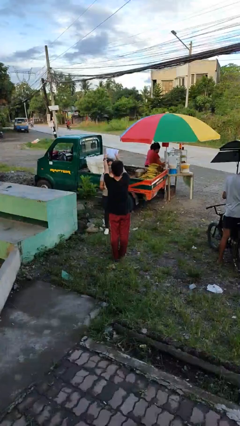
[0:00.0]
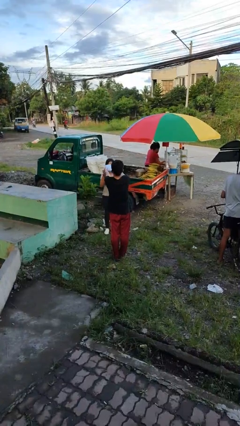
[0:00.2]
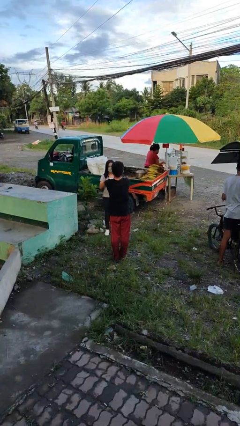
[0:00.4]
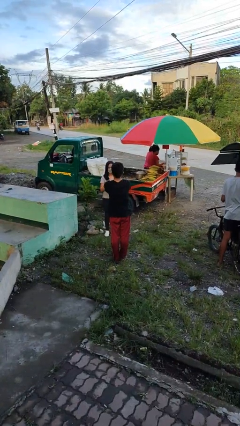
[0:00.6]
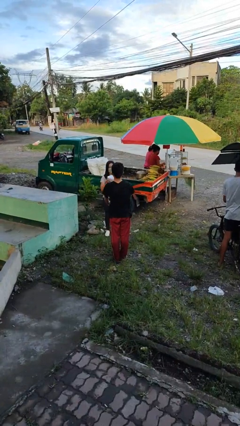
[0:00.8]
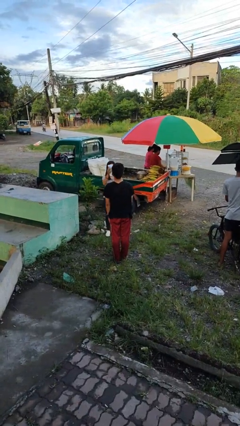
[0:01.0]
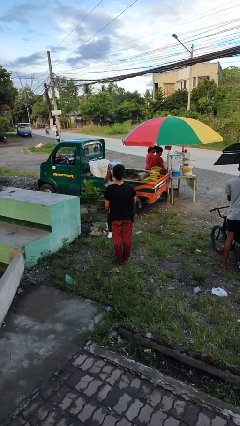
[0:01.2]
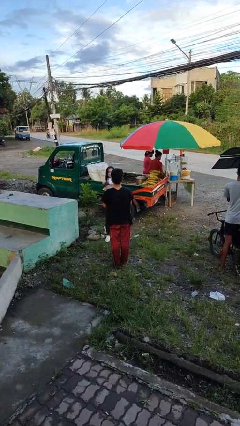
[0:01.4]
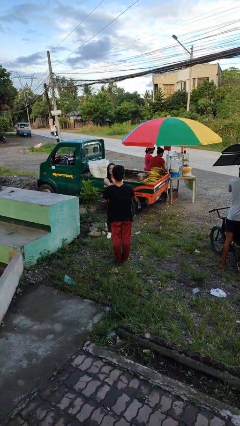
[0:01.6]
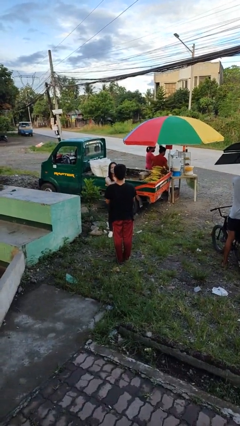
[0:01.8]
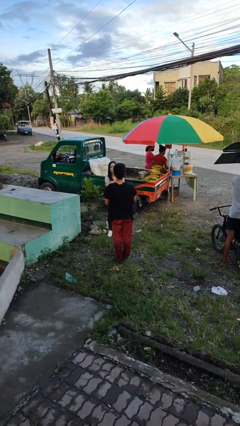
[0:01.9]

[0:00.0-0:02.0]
person transfers object to person

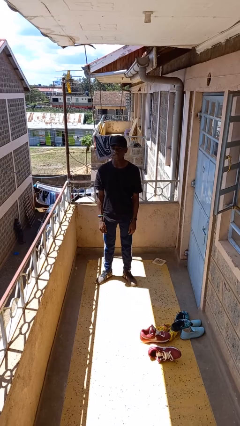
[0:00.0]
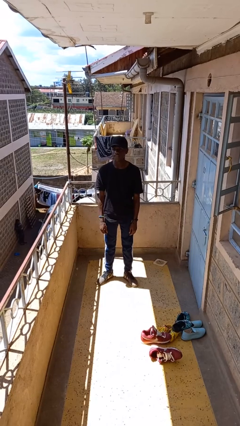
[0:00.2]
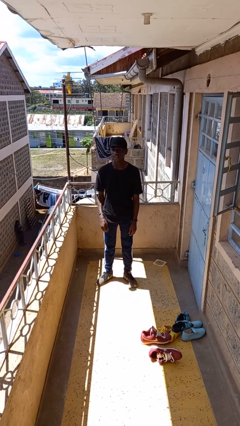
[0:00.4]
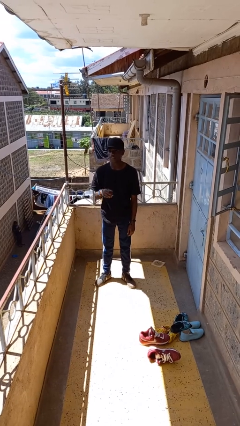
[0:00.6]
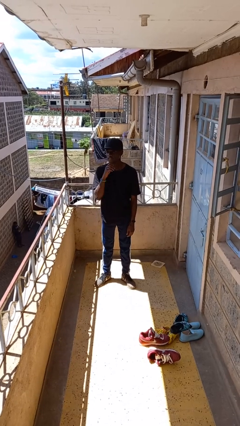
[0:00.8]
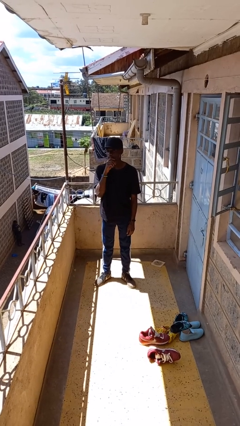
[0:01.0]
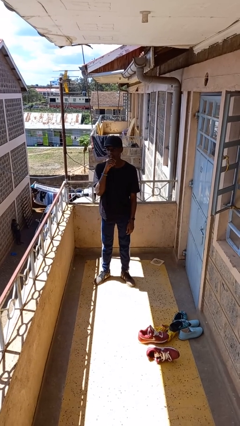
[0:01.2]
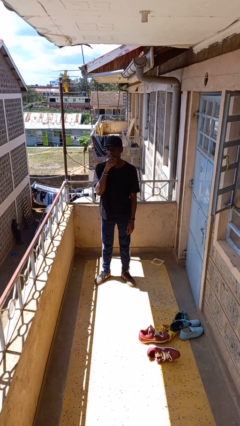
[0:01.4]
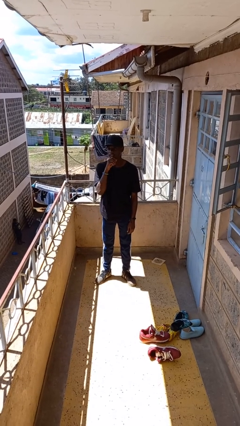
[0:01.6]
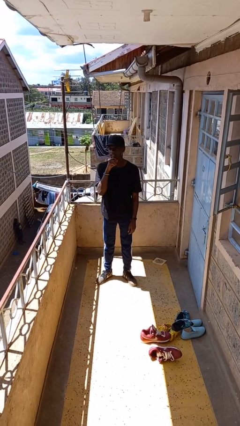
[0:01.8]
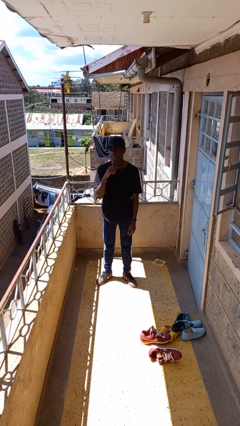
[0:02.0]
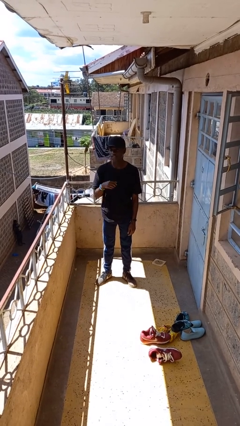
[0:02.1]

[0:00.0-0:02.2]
person strokes chin

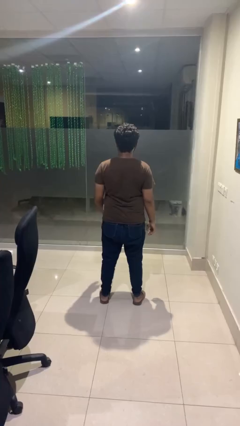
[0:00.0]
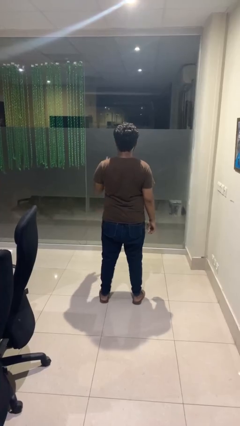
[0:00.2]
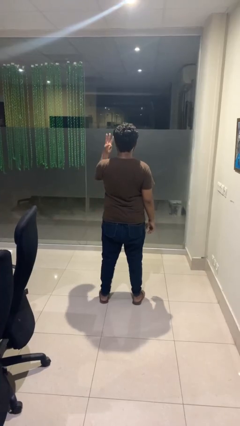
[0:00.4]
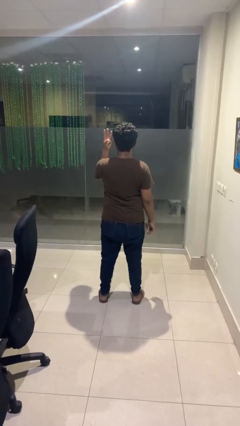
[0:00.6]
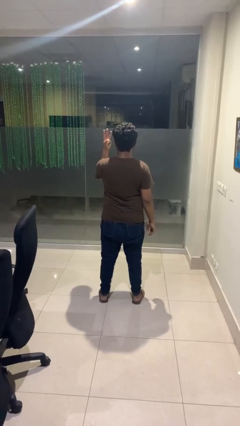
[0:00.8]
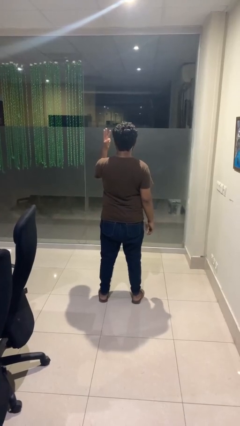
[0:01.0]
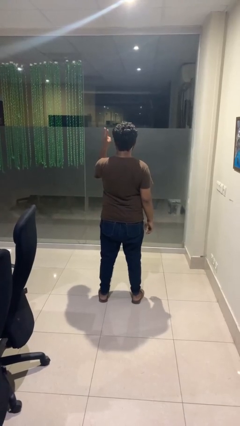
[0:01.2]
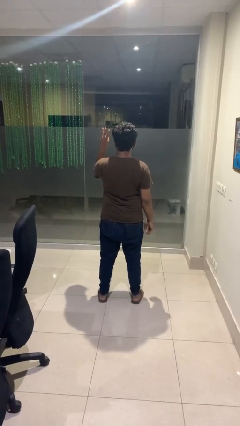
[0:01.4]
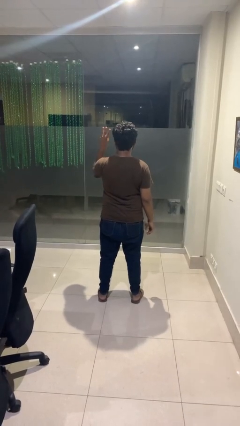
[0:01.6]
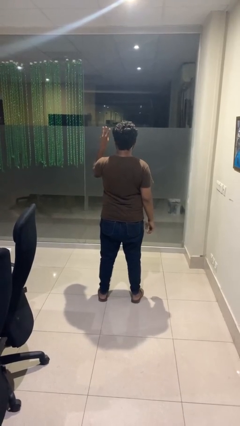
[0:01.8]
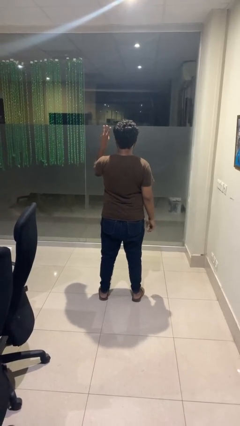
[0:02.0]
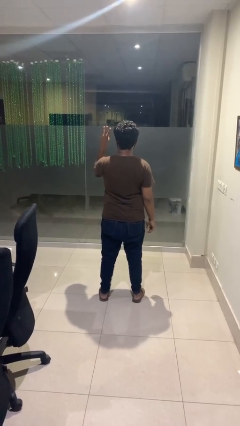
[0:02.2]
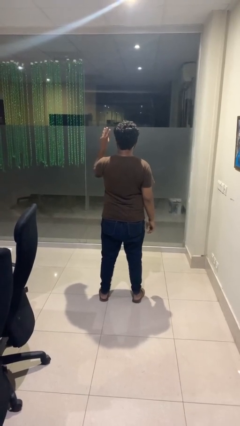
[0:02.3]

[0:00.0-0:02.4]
person gestures number three

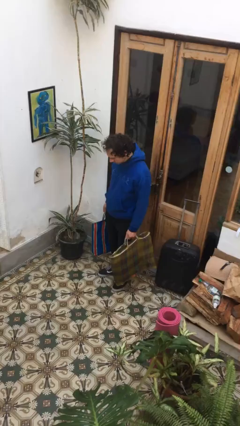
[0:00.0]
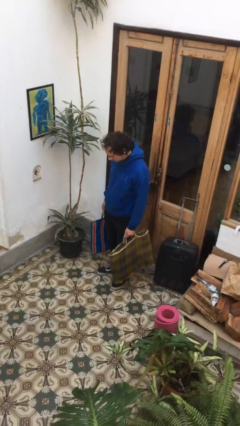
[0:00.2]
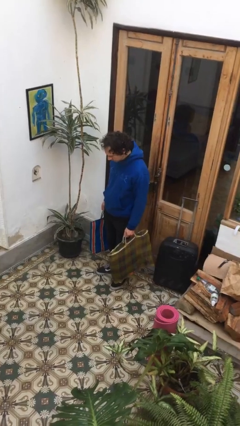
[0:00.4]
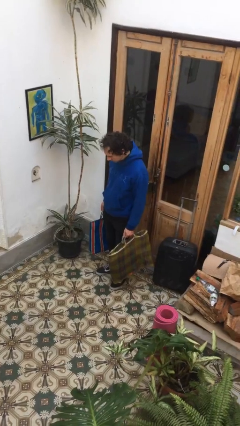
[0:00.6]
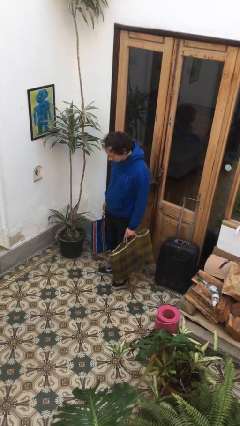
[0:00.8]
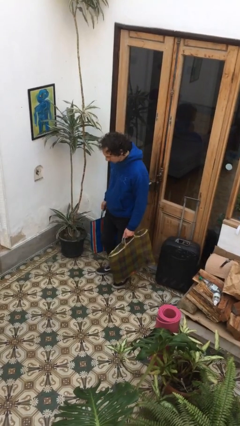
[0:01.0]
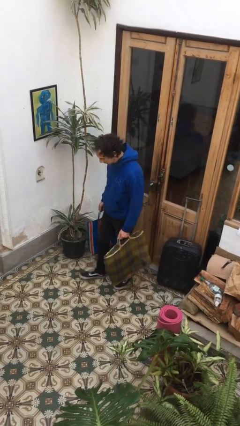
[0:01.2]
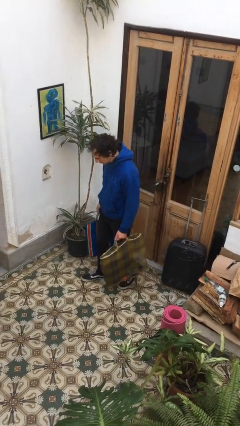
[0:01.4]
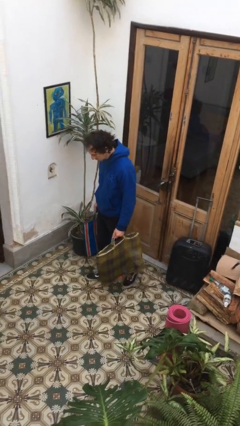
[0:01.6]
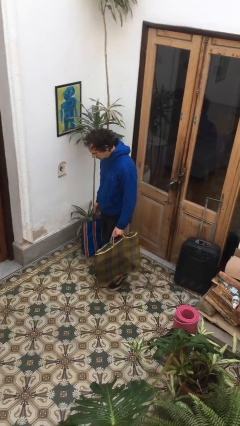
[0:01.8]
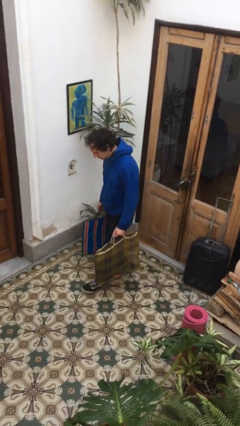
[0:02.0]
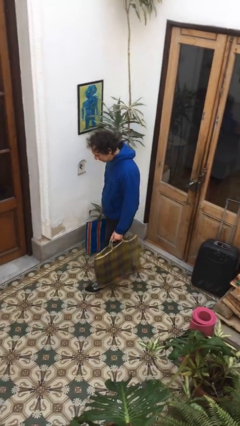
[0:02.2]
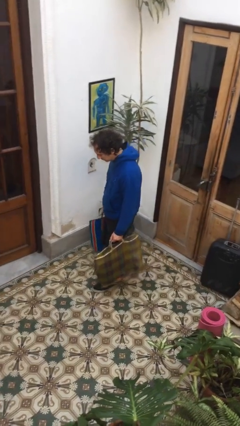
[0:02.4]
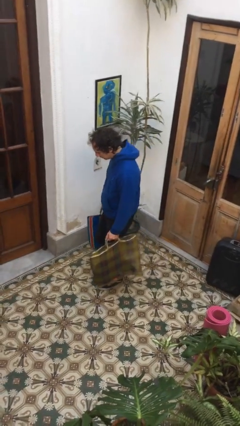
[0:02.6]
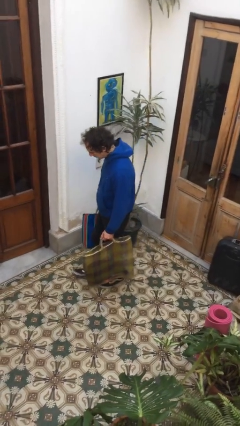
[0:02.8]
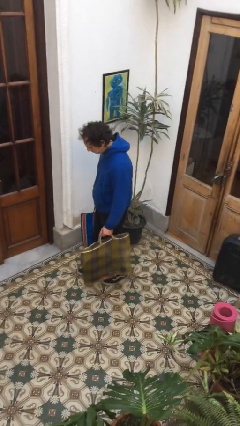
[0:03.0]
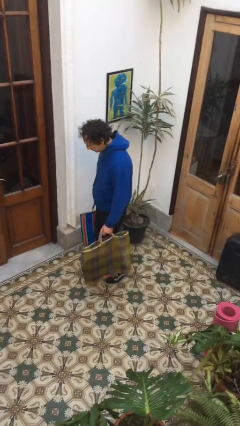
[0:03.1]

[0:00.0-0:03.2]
person carries groceries

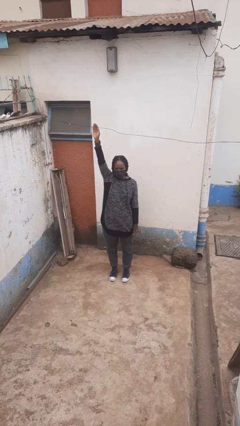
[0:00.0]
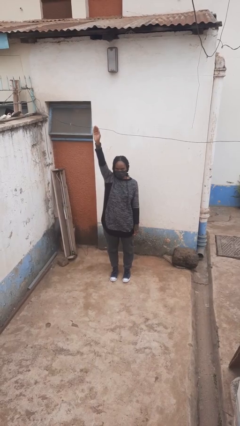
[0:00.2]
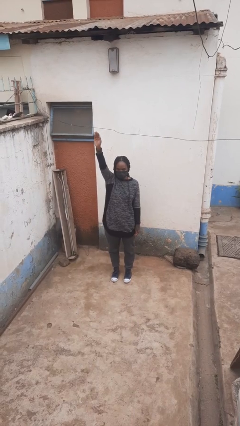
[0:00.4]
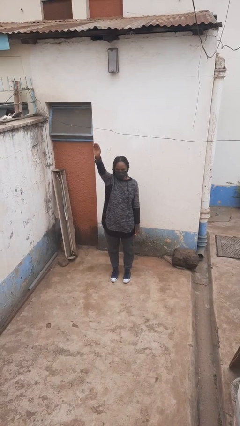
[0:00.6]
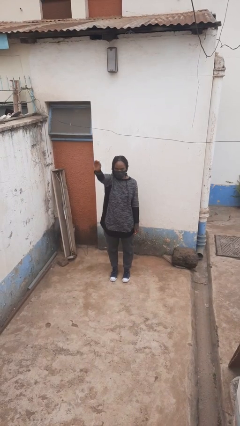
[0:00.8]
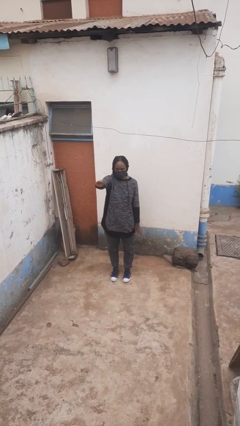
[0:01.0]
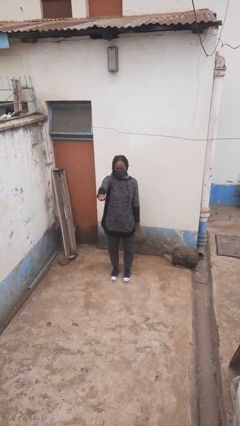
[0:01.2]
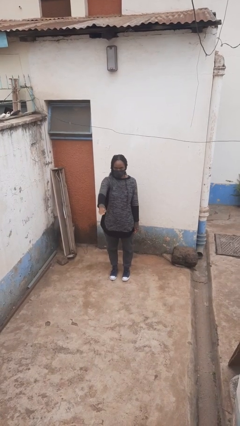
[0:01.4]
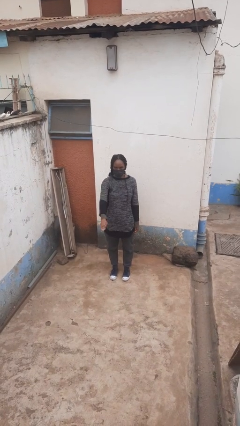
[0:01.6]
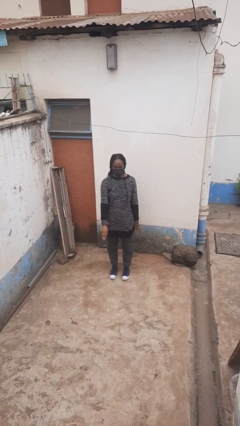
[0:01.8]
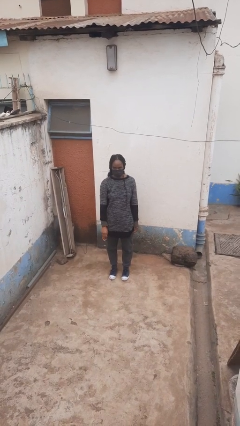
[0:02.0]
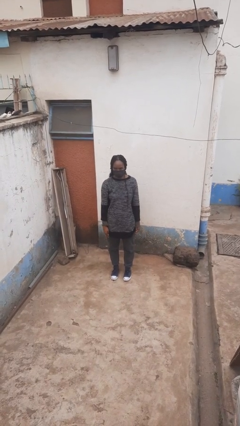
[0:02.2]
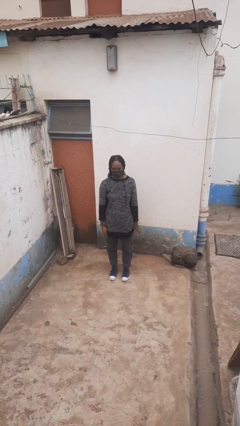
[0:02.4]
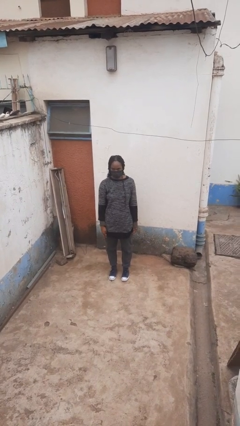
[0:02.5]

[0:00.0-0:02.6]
person gestures lower hand

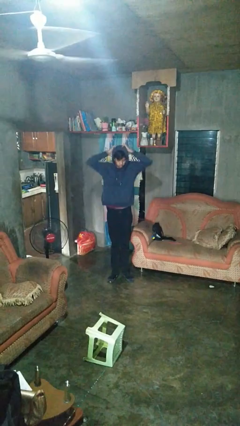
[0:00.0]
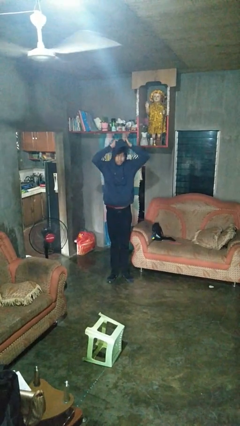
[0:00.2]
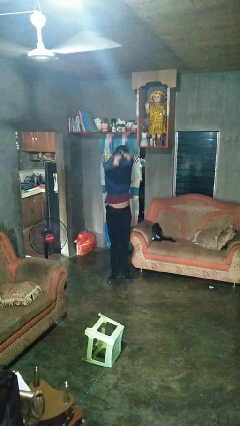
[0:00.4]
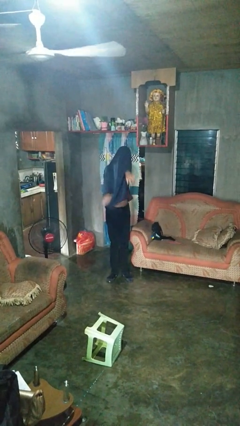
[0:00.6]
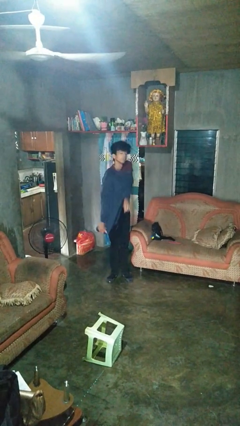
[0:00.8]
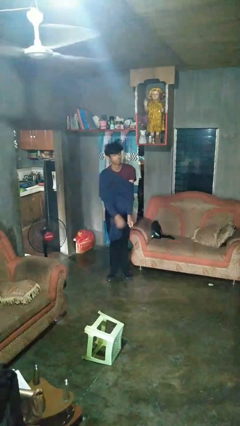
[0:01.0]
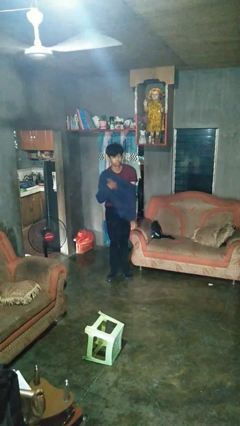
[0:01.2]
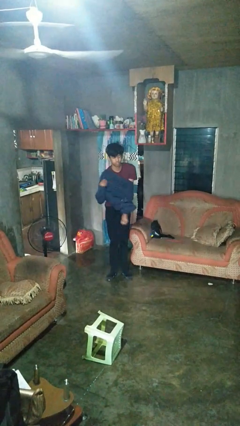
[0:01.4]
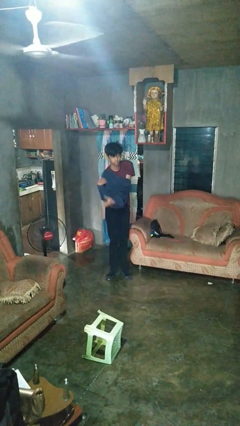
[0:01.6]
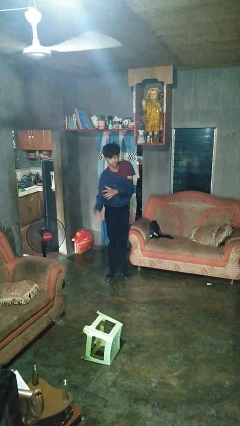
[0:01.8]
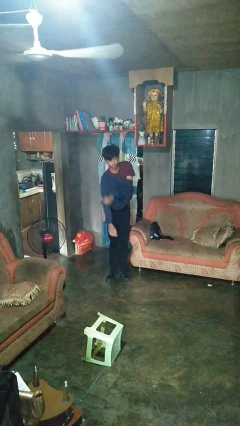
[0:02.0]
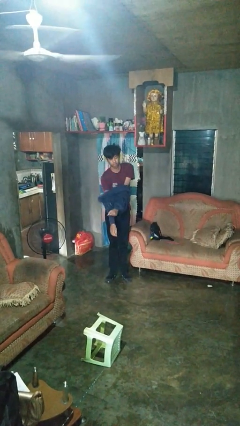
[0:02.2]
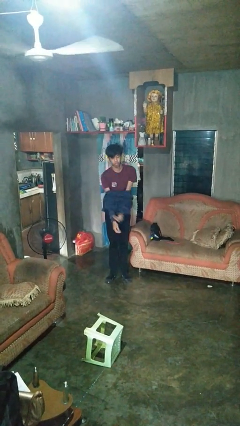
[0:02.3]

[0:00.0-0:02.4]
person takes off hoodie

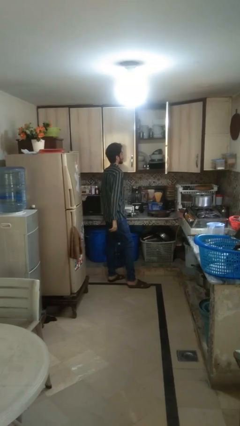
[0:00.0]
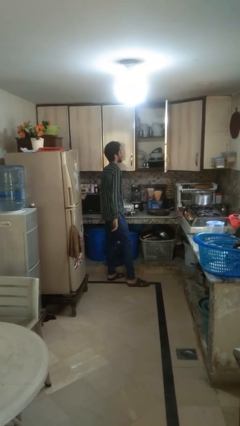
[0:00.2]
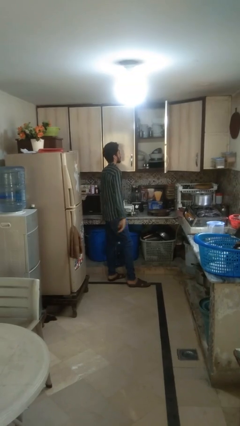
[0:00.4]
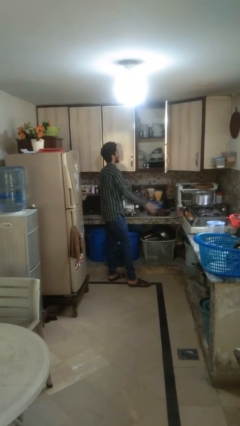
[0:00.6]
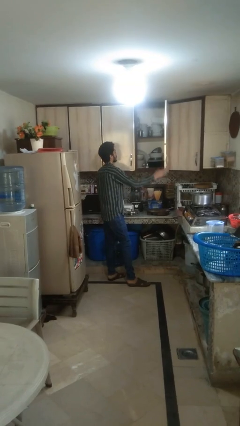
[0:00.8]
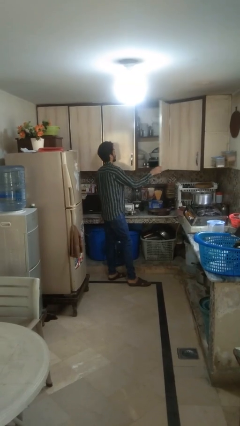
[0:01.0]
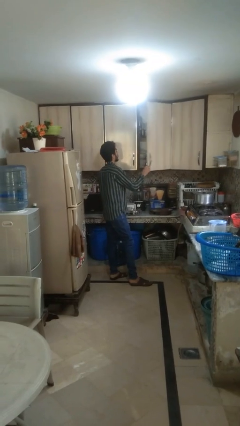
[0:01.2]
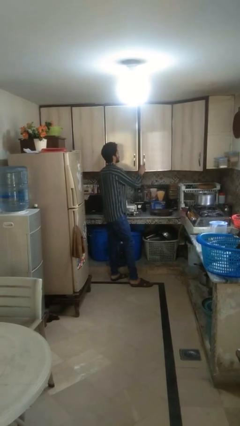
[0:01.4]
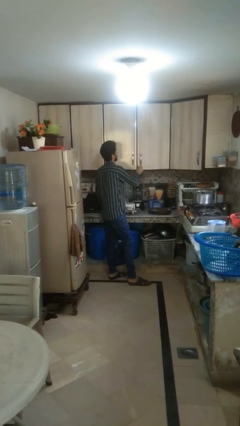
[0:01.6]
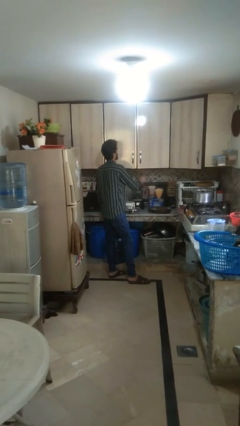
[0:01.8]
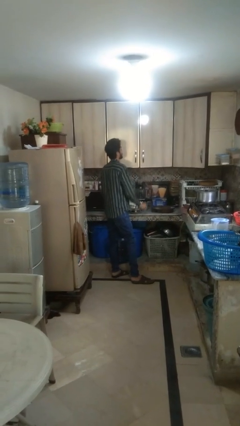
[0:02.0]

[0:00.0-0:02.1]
person closes cabinet

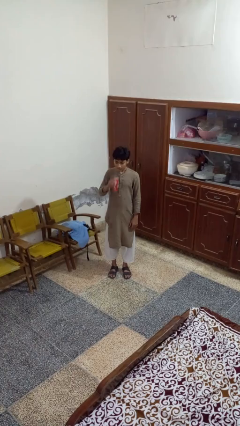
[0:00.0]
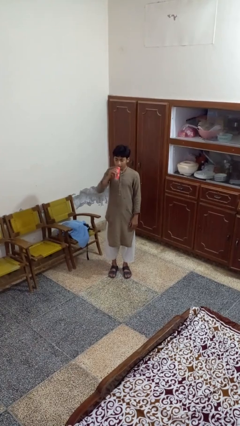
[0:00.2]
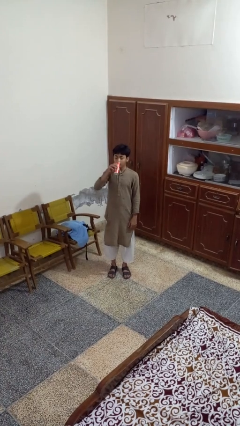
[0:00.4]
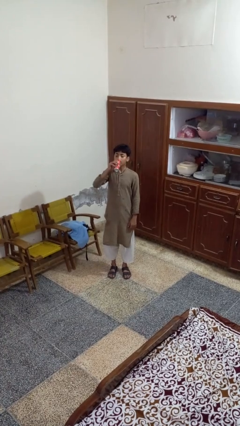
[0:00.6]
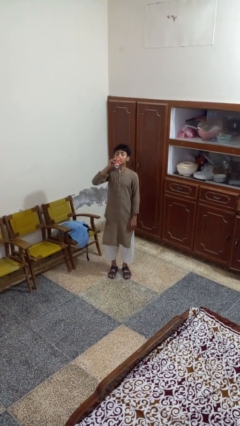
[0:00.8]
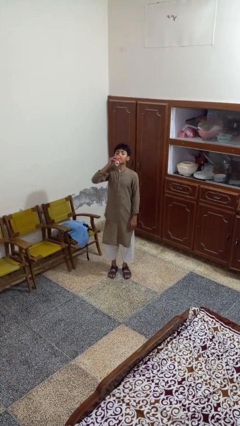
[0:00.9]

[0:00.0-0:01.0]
person drinks from beverage can
